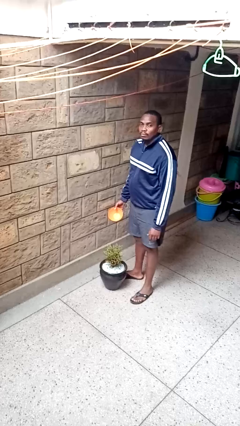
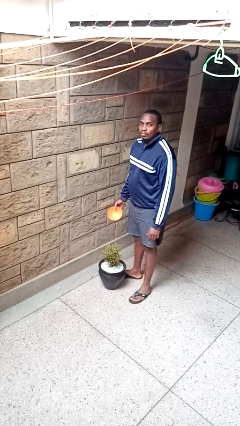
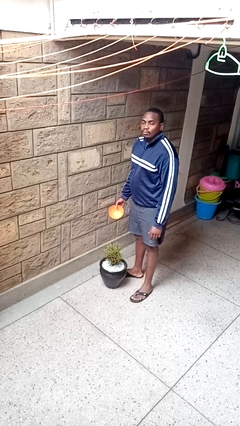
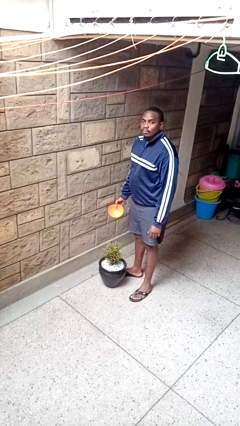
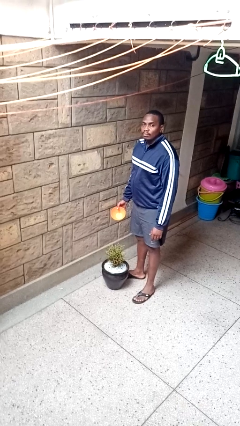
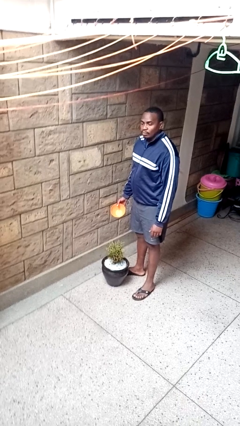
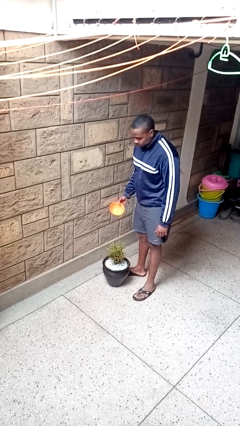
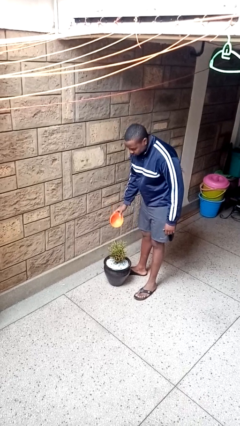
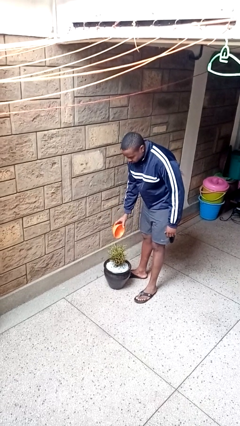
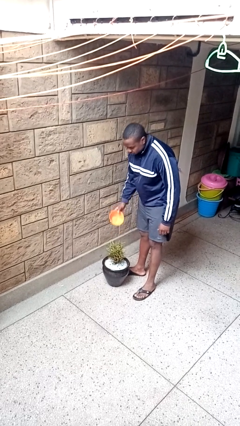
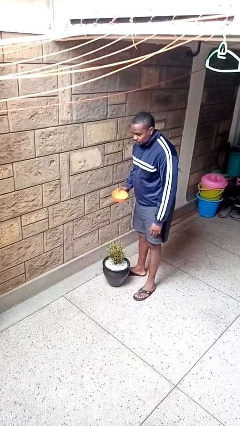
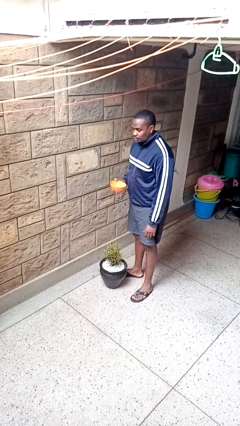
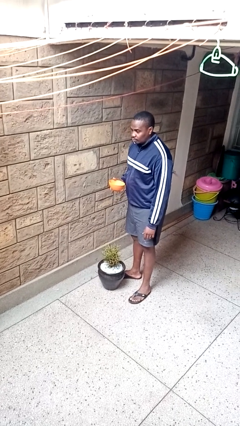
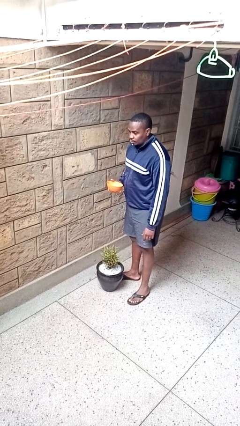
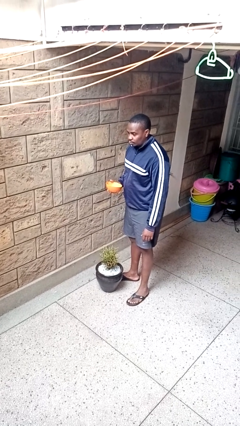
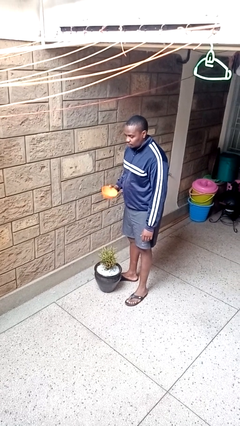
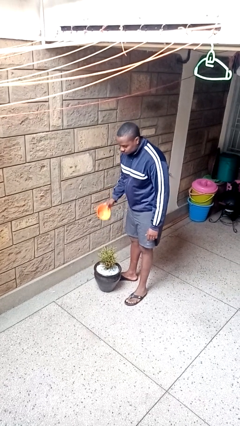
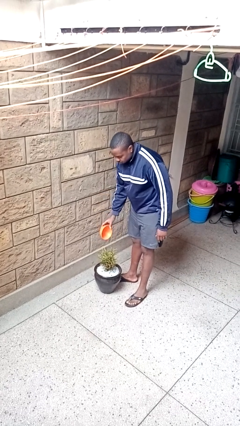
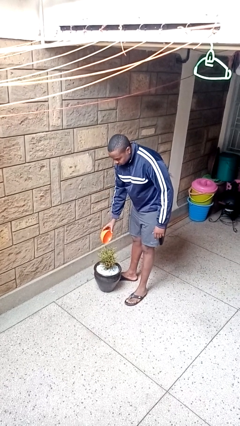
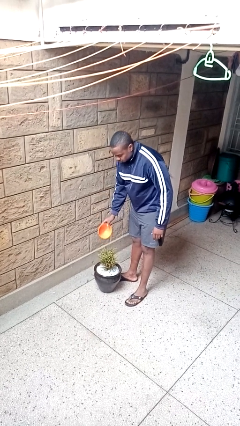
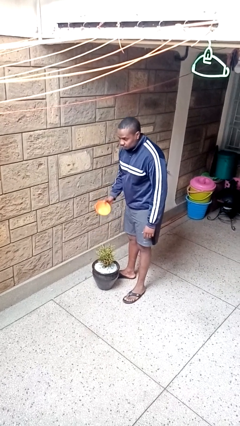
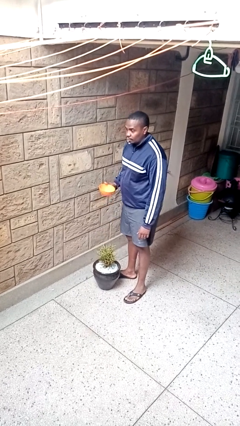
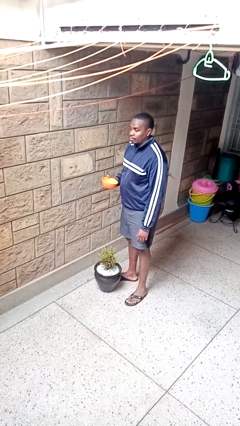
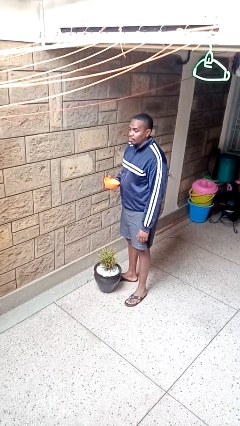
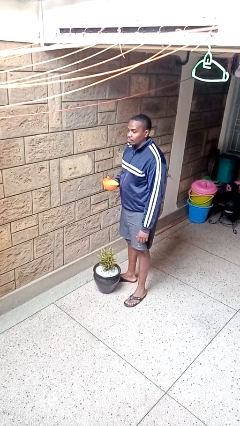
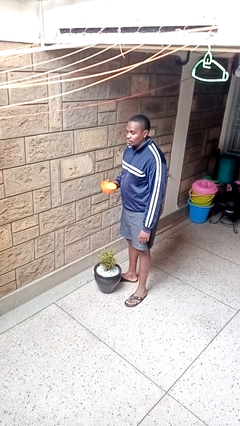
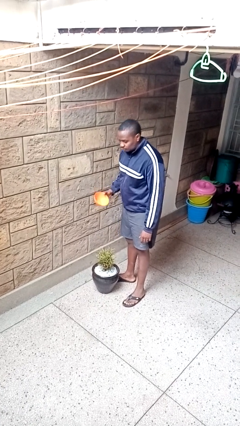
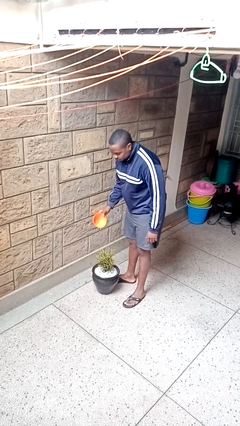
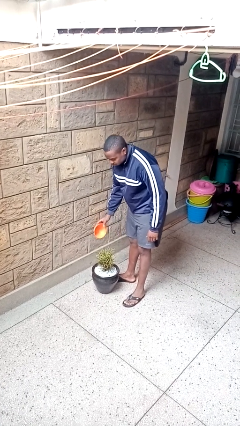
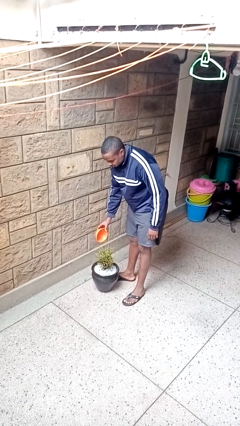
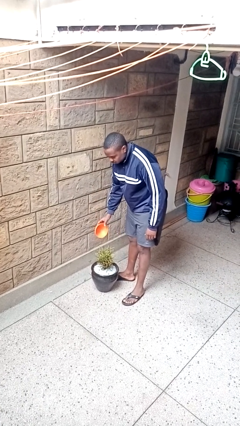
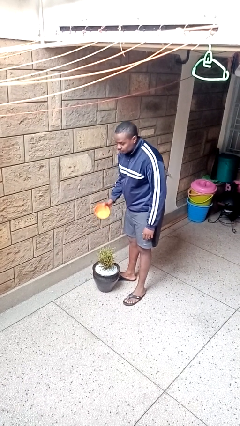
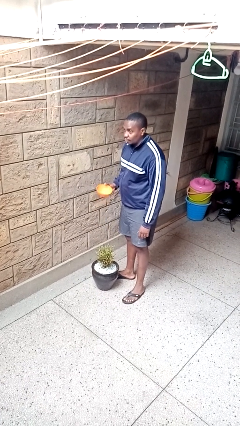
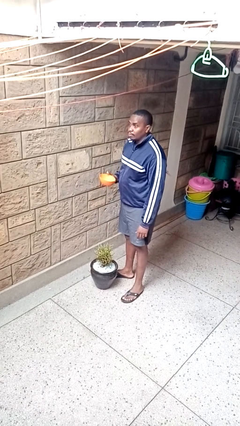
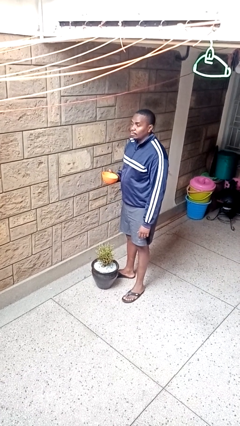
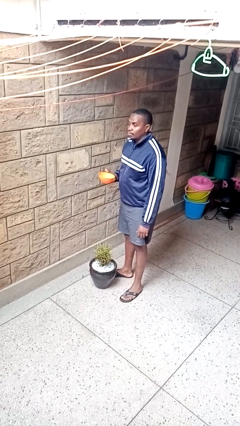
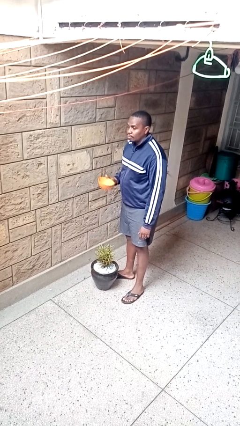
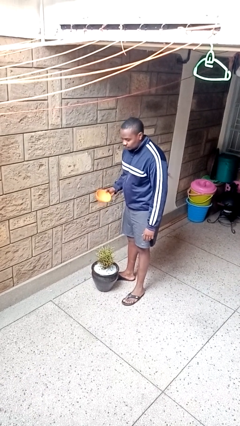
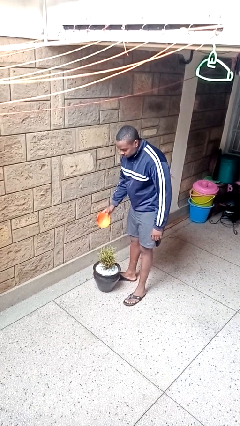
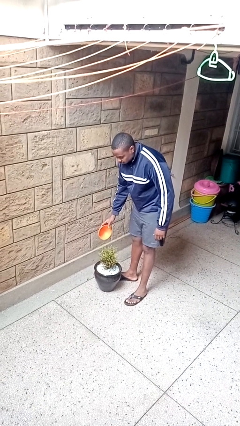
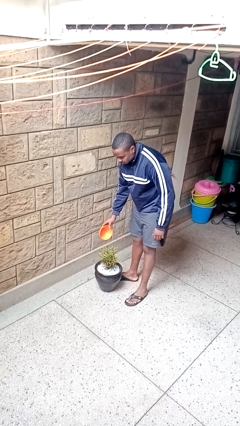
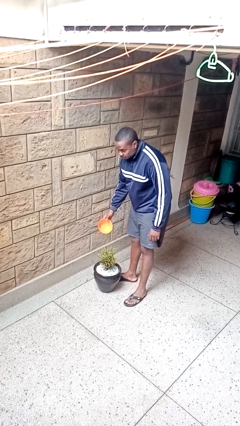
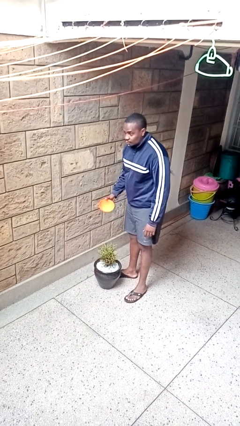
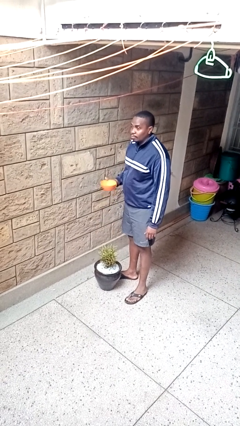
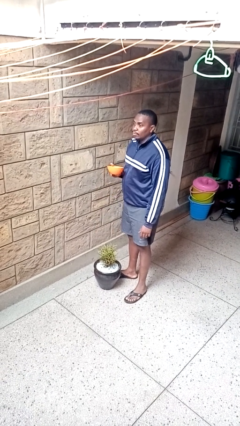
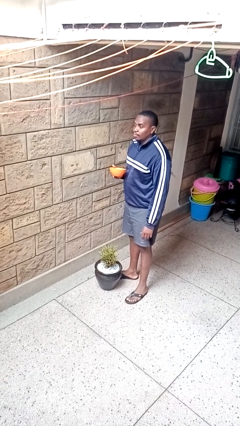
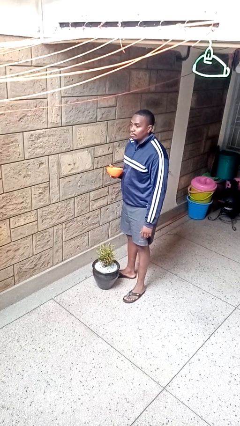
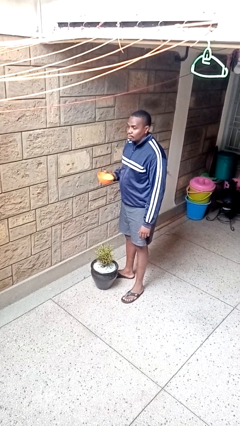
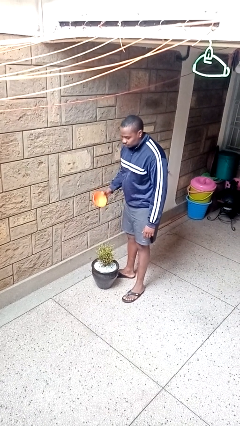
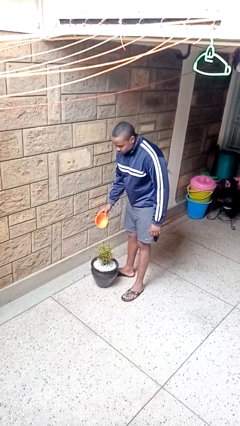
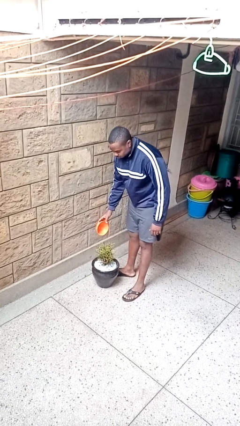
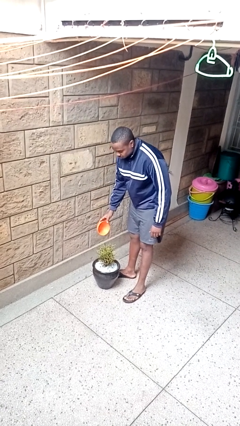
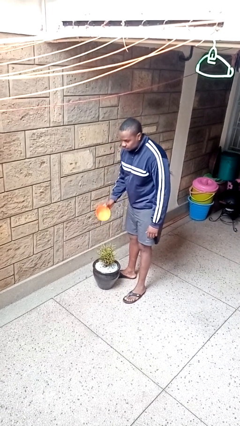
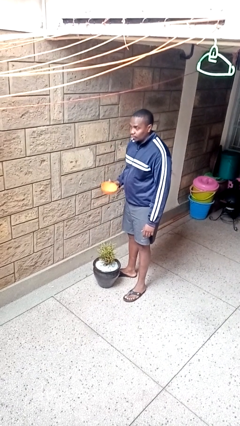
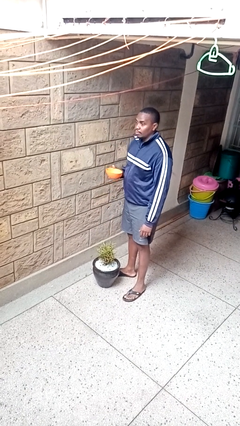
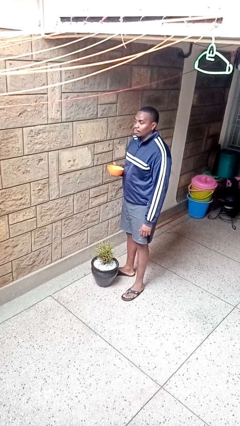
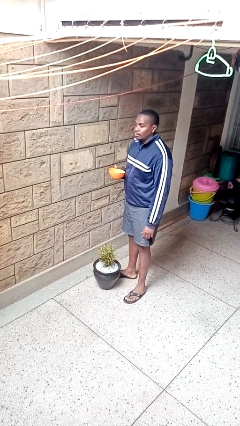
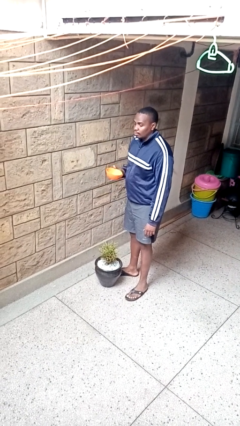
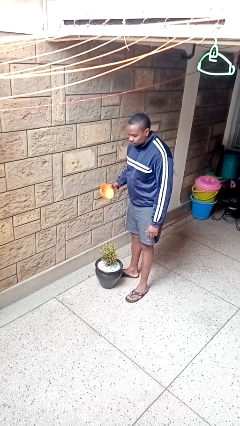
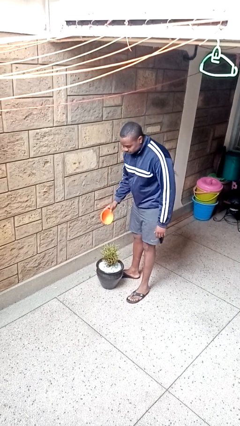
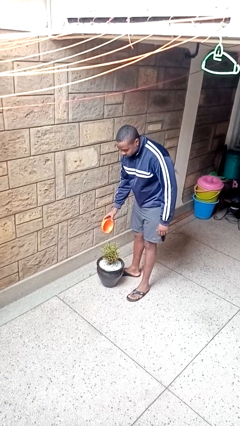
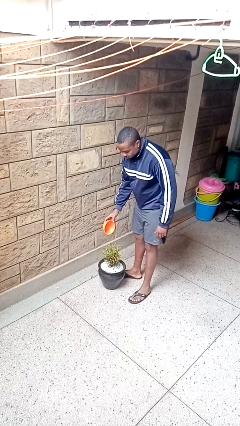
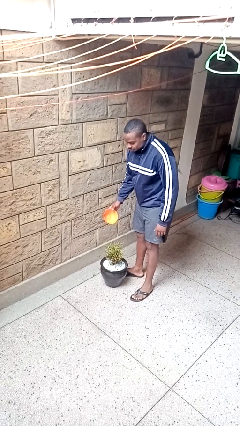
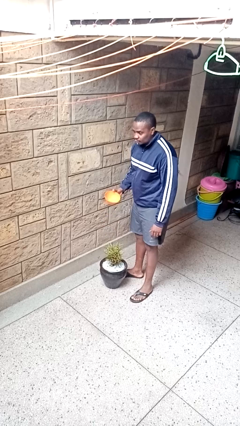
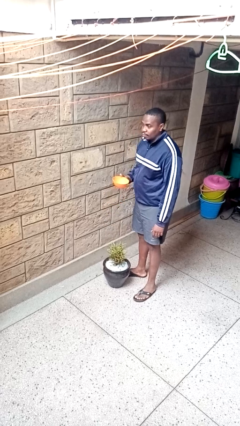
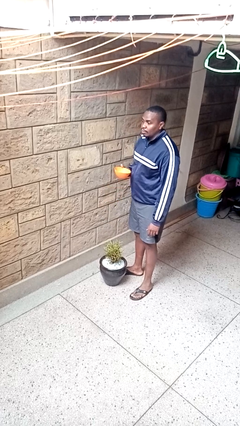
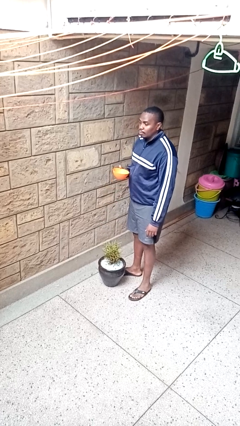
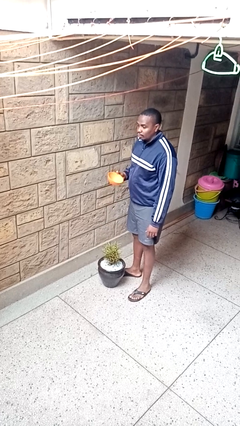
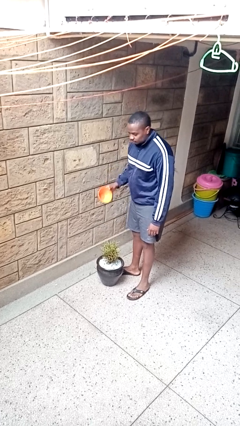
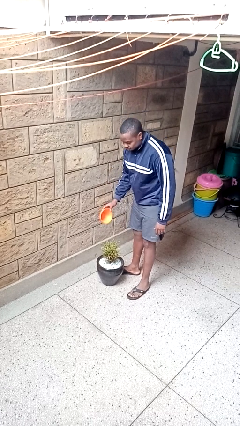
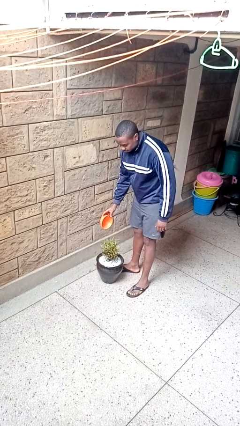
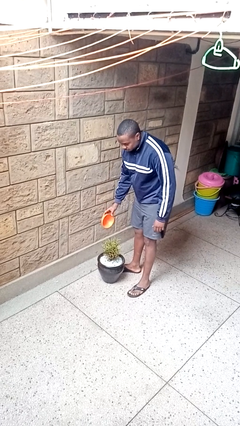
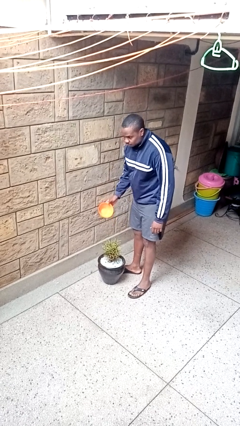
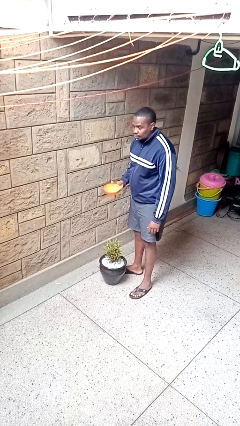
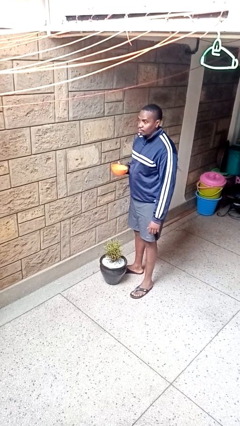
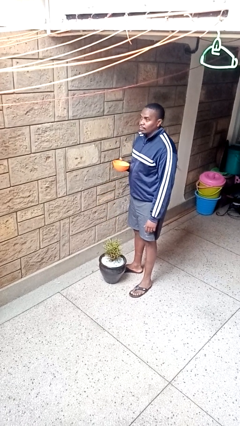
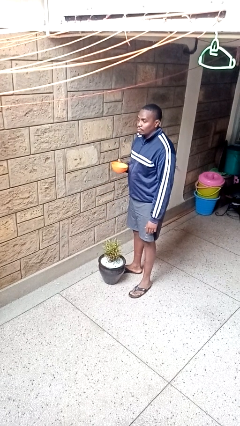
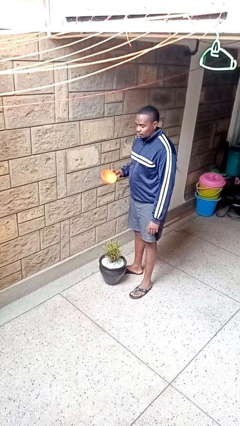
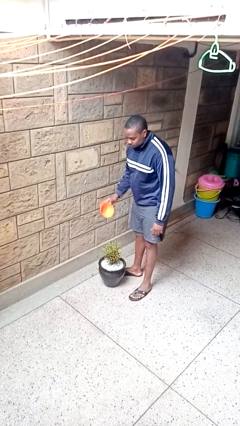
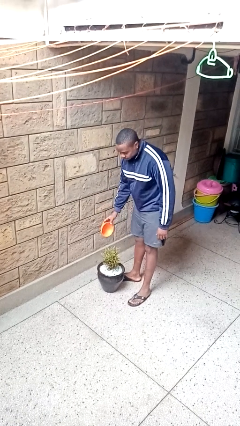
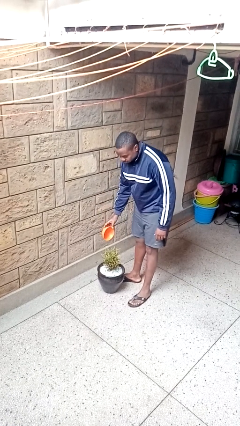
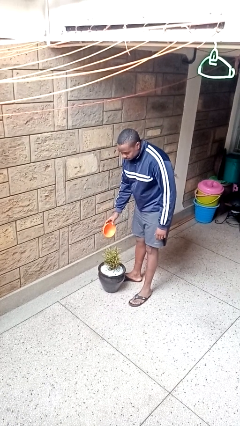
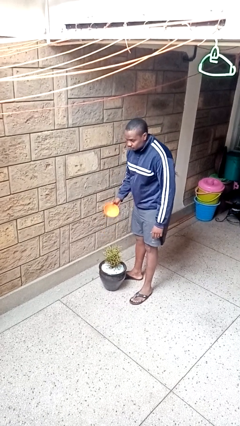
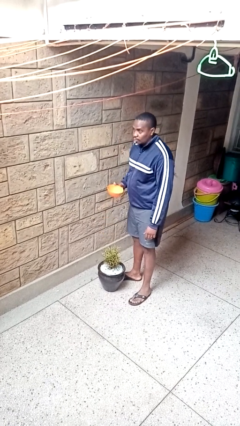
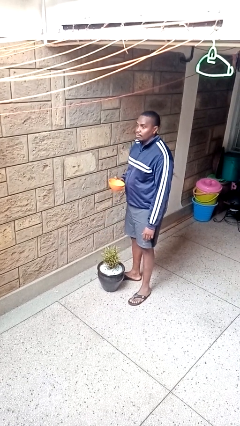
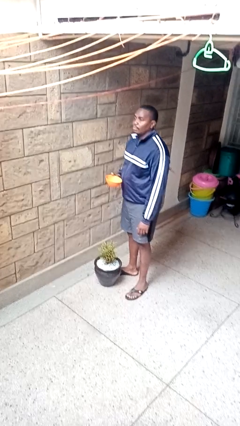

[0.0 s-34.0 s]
person waters houseplant

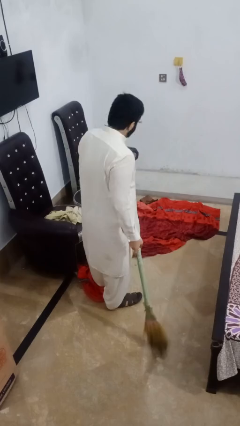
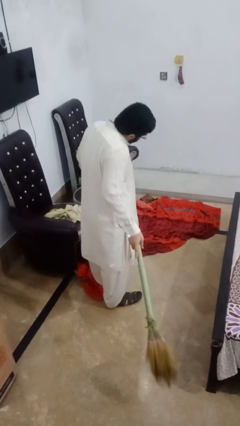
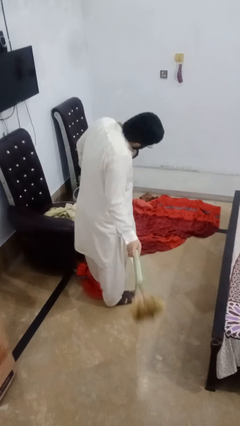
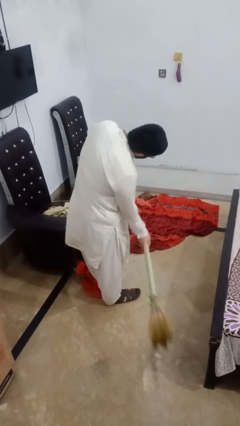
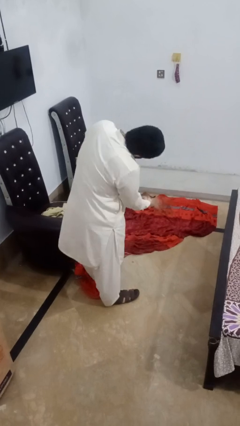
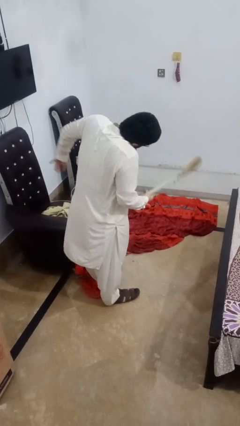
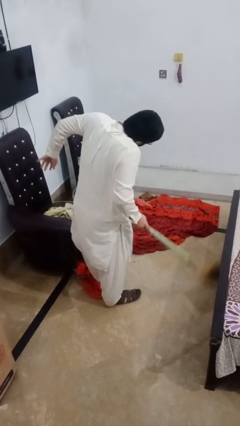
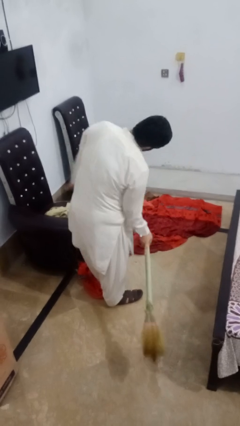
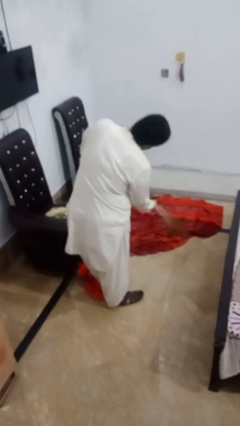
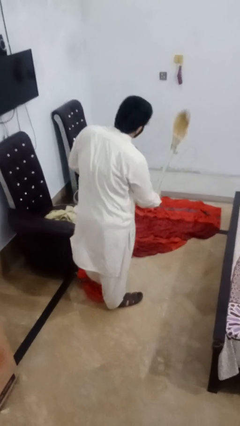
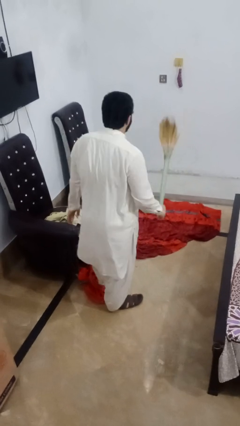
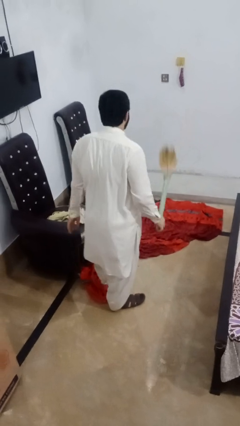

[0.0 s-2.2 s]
person sweeps floor
